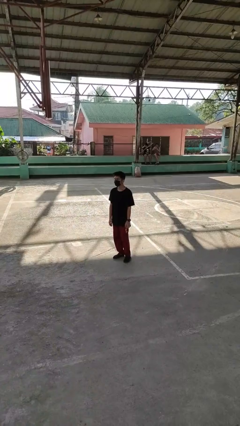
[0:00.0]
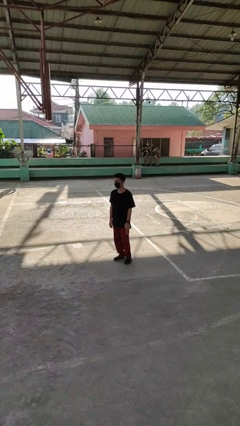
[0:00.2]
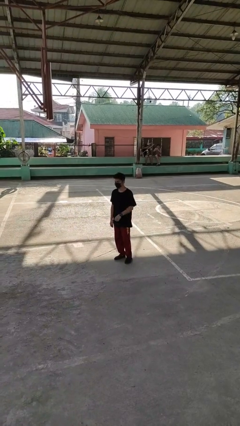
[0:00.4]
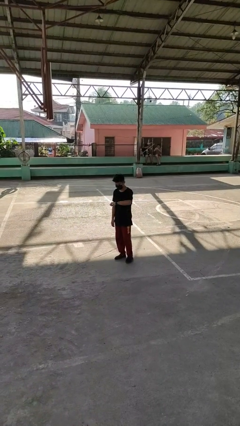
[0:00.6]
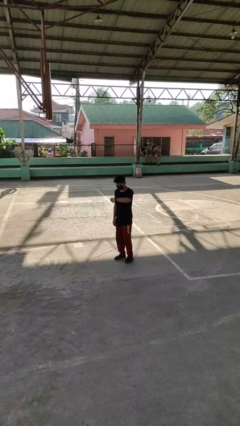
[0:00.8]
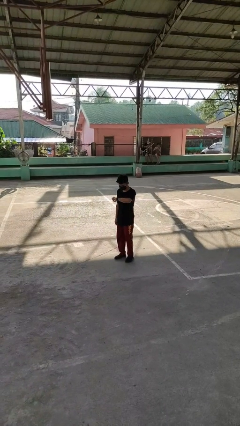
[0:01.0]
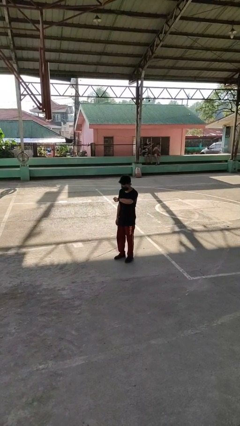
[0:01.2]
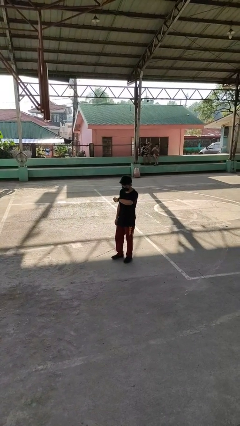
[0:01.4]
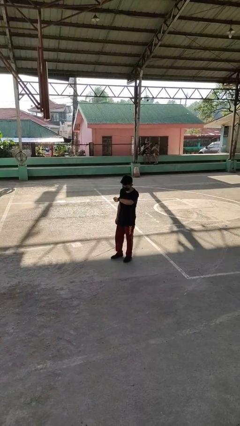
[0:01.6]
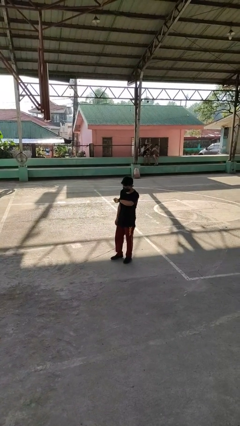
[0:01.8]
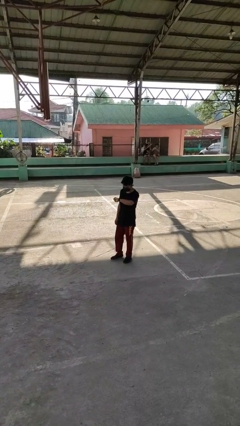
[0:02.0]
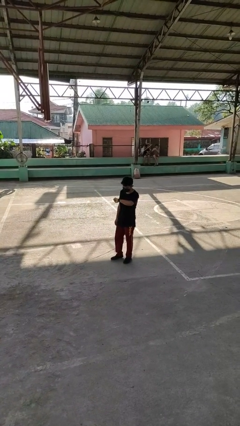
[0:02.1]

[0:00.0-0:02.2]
person looks at wristwatch

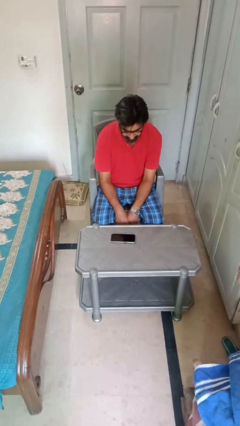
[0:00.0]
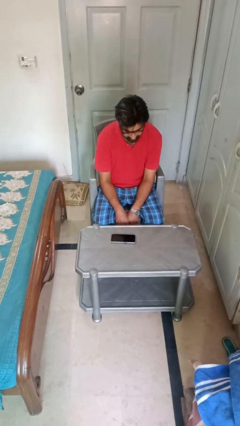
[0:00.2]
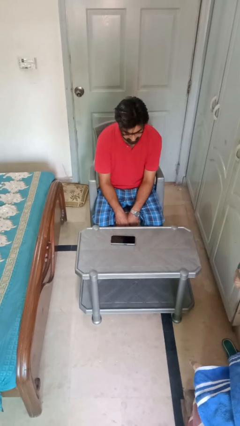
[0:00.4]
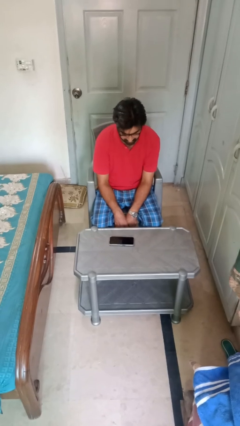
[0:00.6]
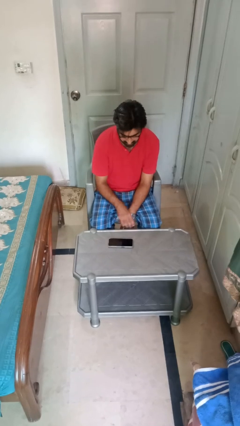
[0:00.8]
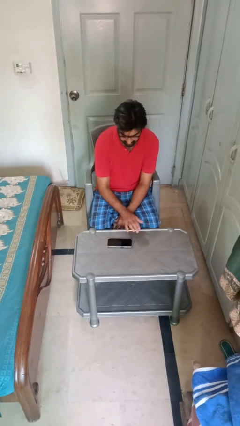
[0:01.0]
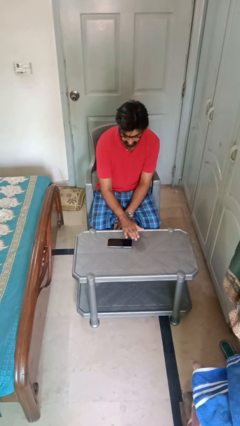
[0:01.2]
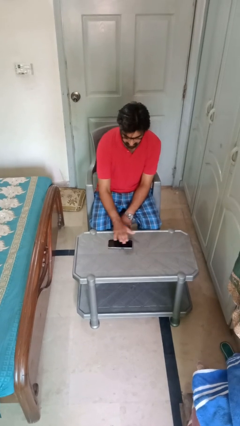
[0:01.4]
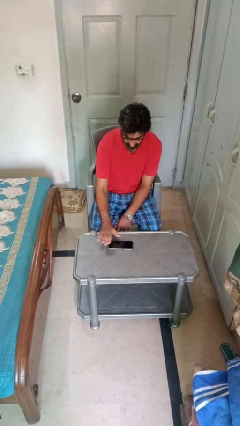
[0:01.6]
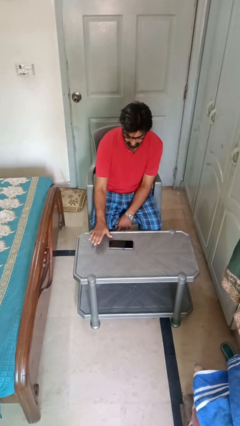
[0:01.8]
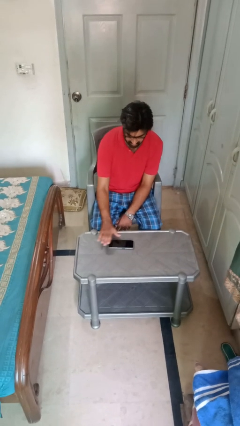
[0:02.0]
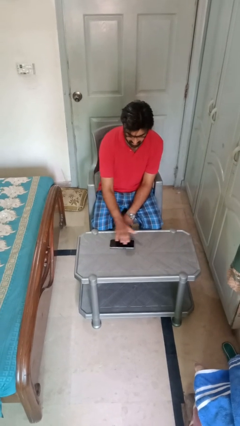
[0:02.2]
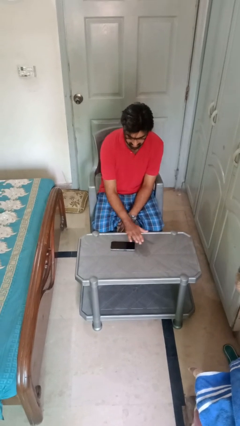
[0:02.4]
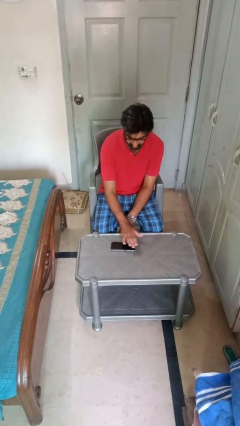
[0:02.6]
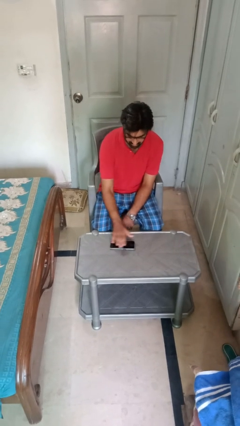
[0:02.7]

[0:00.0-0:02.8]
person waves hand over object

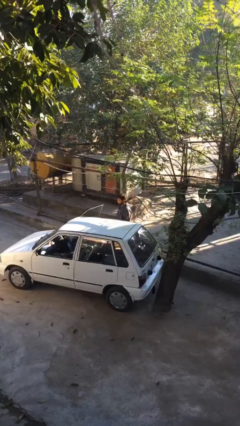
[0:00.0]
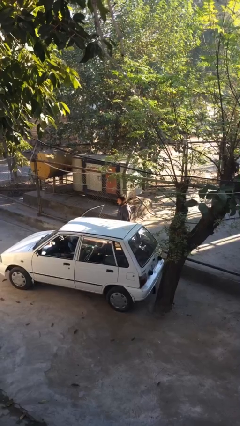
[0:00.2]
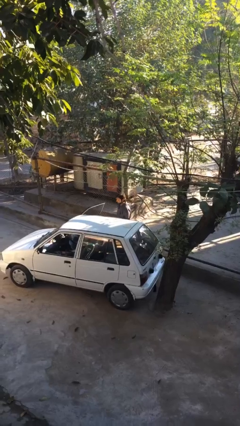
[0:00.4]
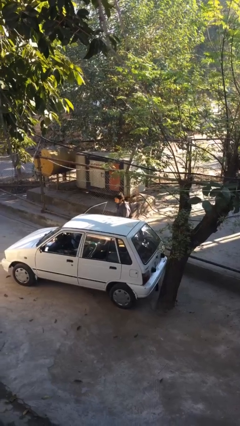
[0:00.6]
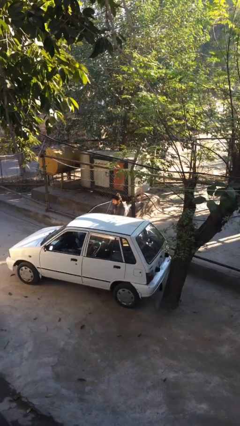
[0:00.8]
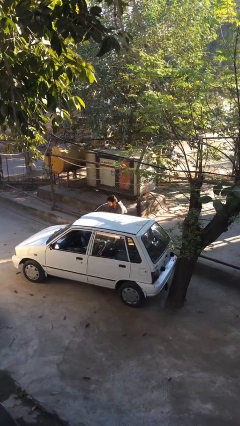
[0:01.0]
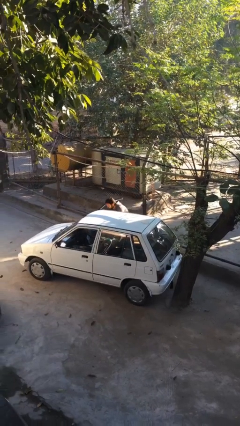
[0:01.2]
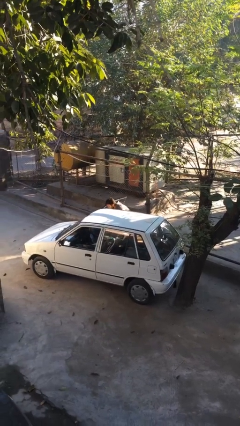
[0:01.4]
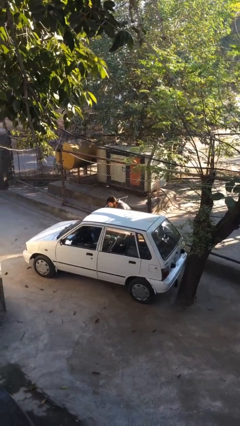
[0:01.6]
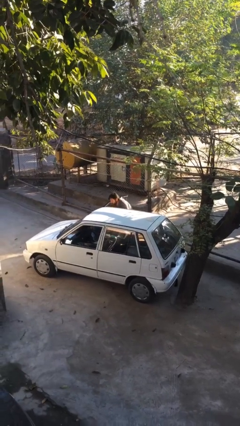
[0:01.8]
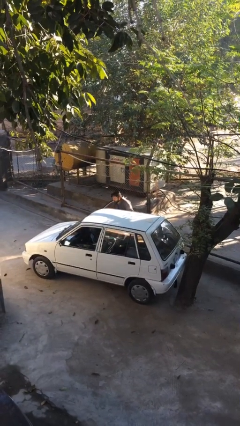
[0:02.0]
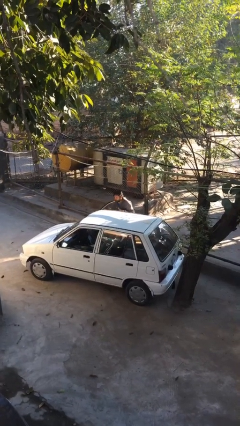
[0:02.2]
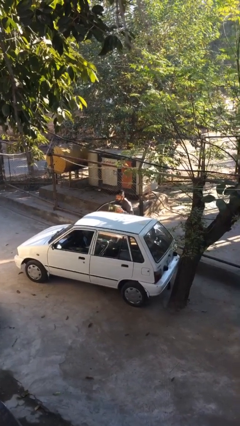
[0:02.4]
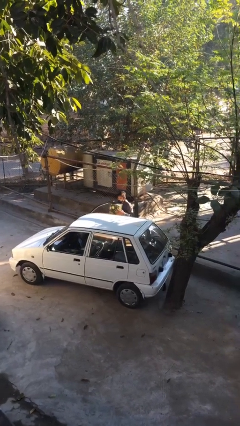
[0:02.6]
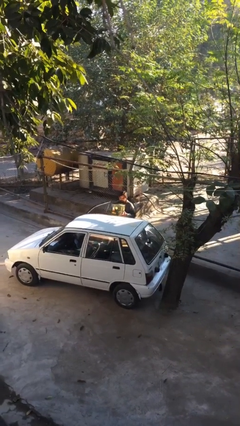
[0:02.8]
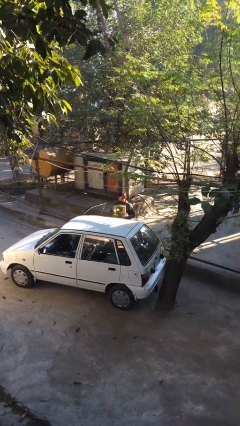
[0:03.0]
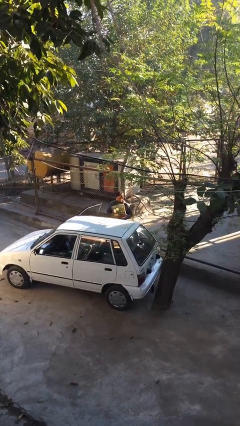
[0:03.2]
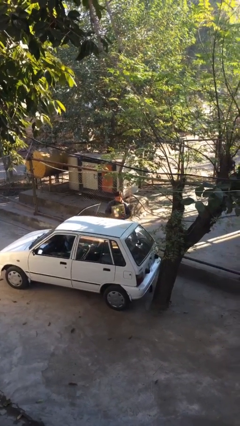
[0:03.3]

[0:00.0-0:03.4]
person unloads car

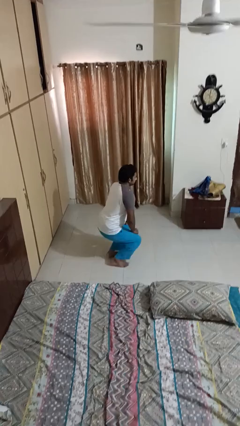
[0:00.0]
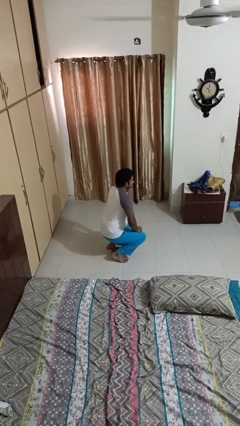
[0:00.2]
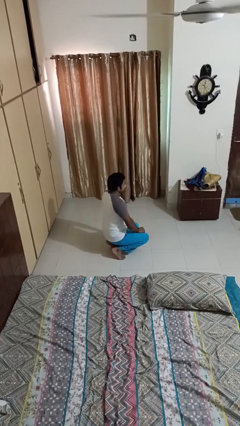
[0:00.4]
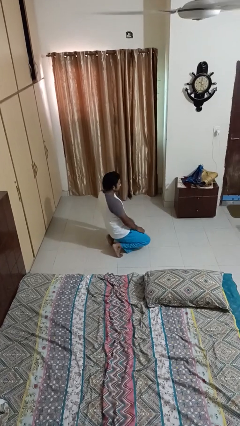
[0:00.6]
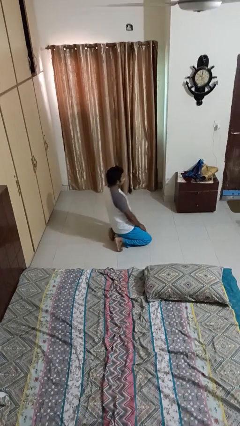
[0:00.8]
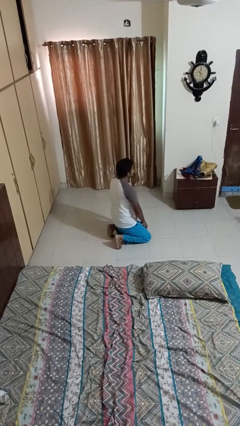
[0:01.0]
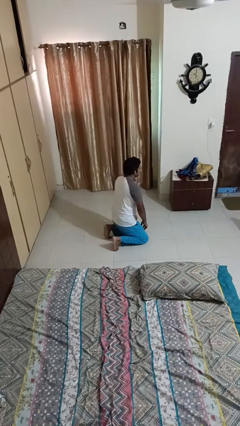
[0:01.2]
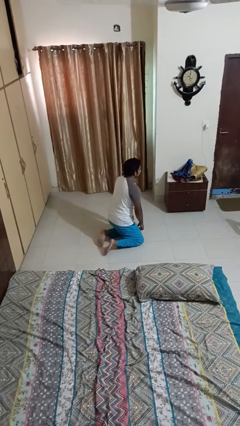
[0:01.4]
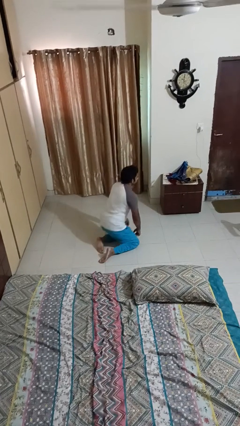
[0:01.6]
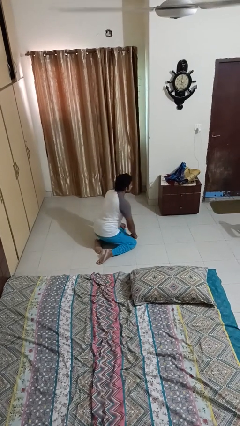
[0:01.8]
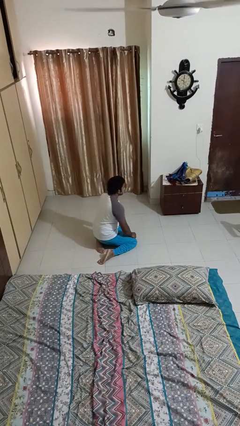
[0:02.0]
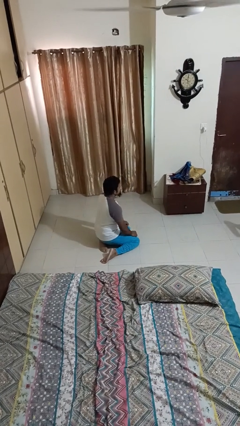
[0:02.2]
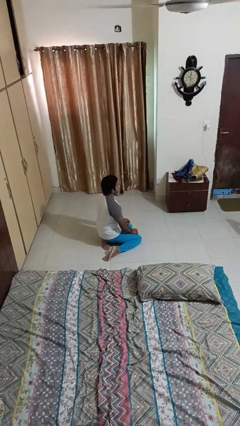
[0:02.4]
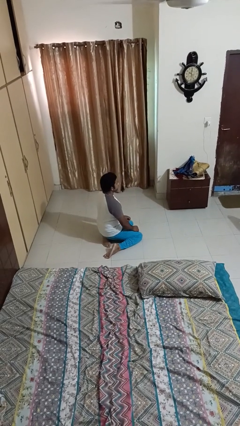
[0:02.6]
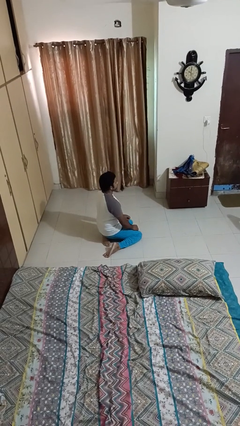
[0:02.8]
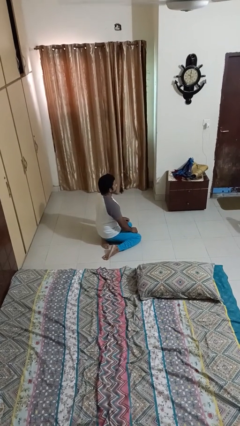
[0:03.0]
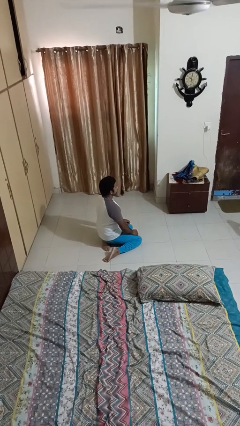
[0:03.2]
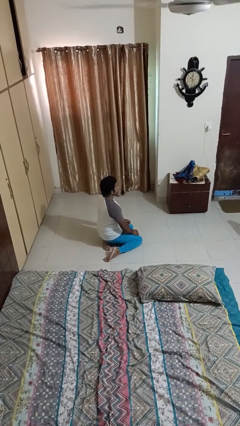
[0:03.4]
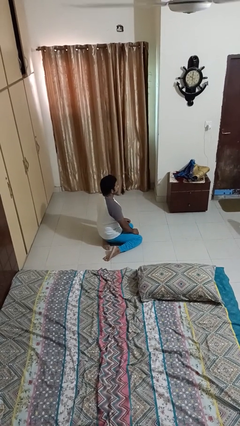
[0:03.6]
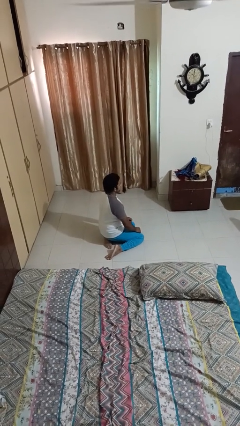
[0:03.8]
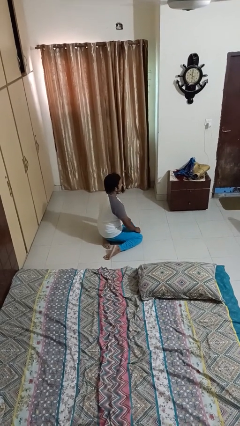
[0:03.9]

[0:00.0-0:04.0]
person kneels

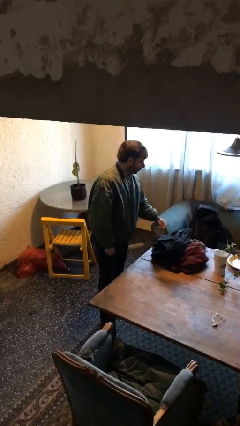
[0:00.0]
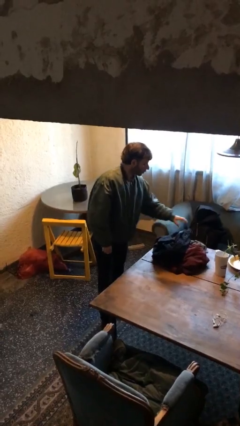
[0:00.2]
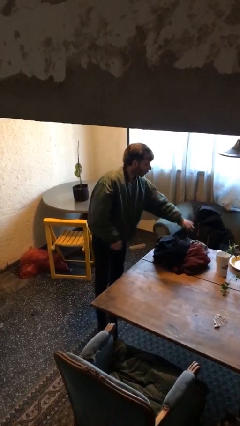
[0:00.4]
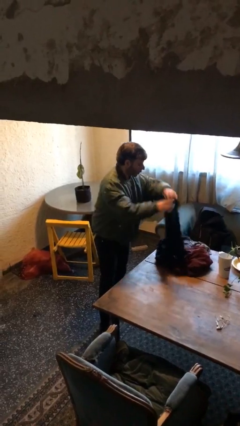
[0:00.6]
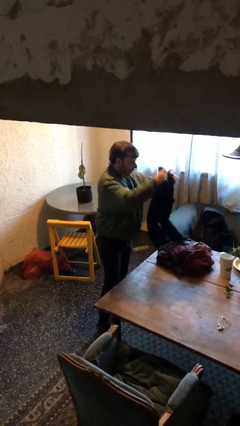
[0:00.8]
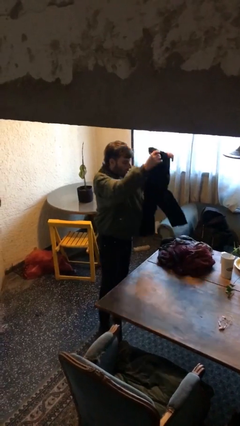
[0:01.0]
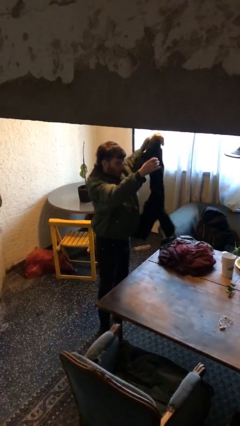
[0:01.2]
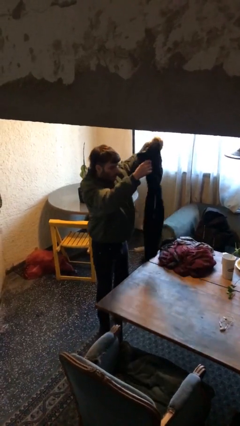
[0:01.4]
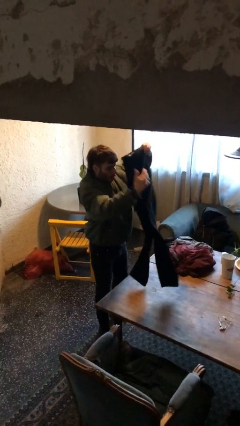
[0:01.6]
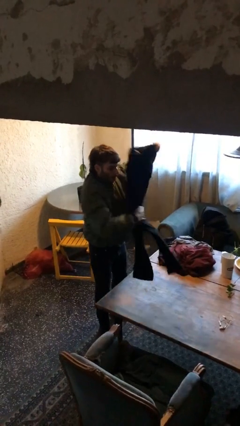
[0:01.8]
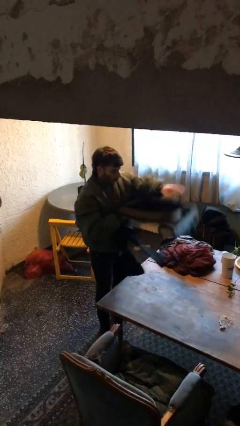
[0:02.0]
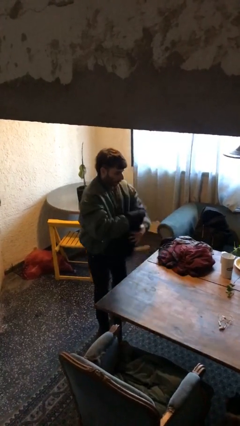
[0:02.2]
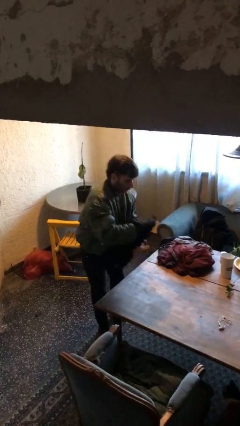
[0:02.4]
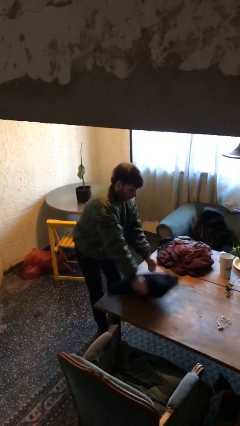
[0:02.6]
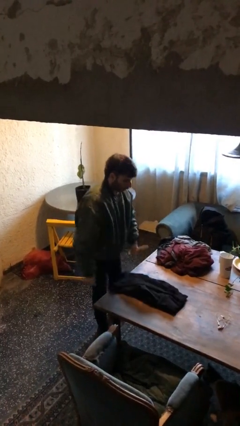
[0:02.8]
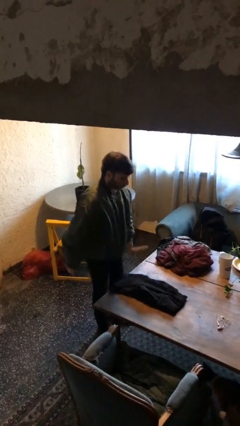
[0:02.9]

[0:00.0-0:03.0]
person folds pants

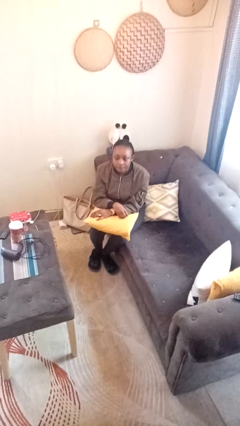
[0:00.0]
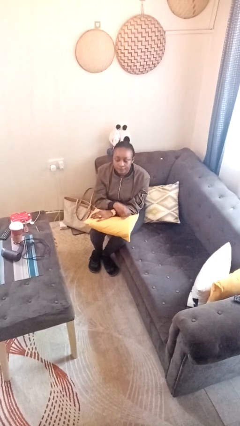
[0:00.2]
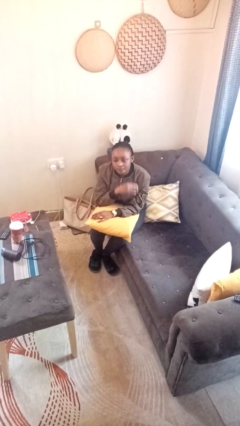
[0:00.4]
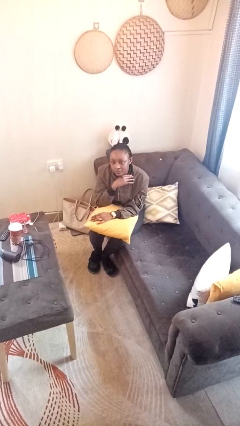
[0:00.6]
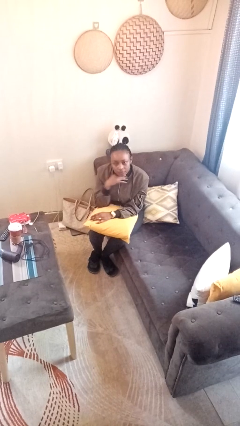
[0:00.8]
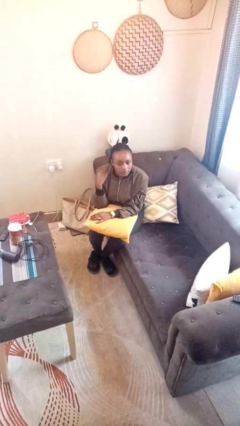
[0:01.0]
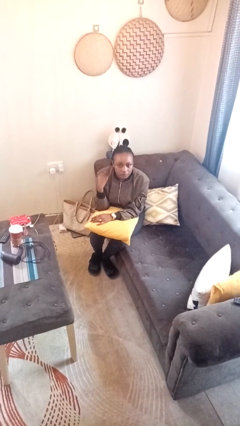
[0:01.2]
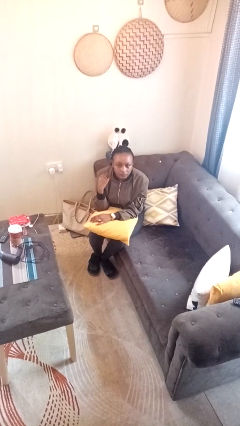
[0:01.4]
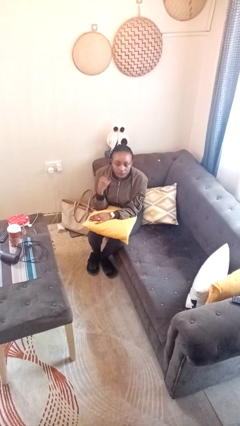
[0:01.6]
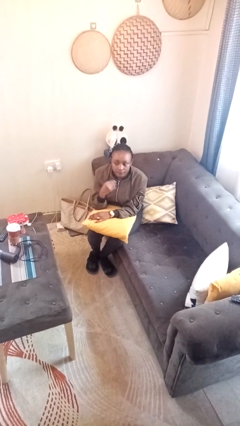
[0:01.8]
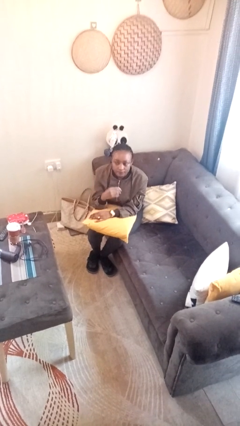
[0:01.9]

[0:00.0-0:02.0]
person gestures cut
